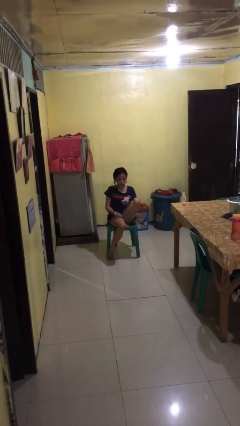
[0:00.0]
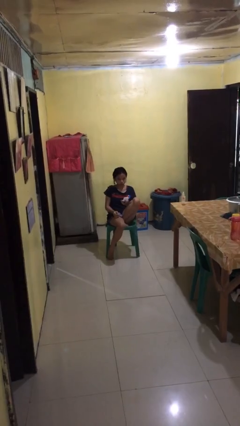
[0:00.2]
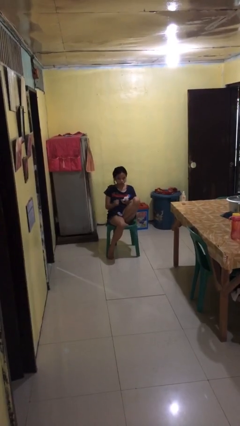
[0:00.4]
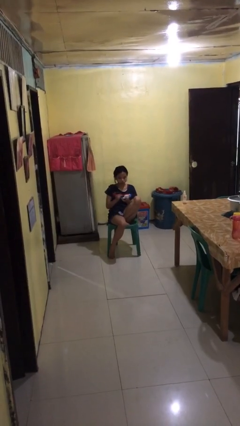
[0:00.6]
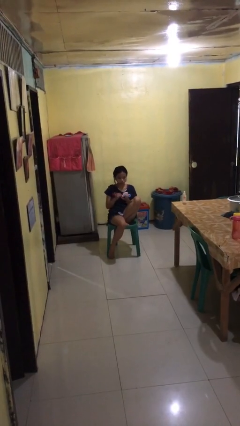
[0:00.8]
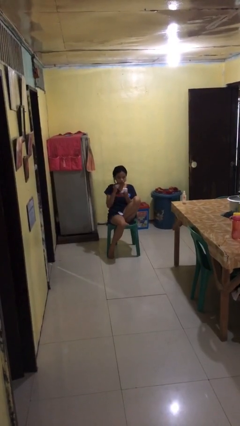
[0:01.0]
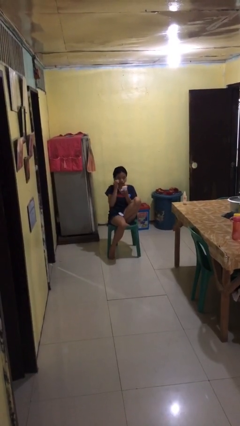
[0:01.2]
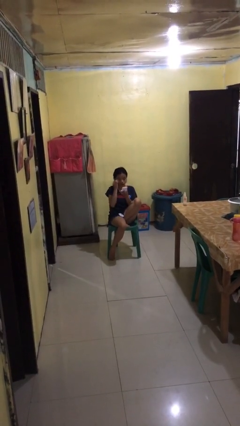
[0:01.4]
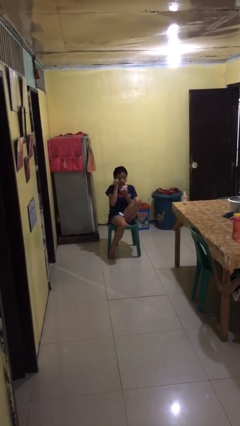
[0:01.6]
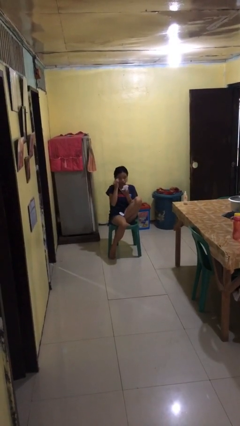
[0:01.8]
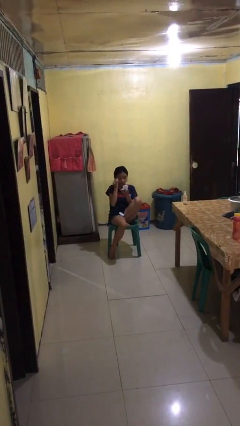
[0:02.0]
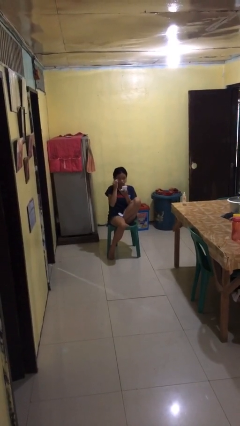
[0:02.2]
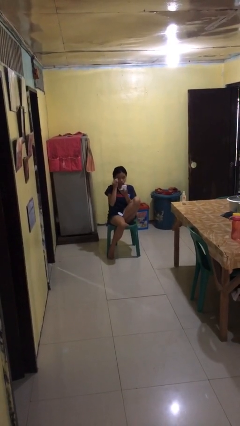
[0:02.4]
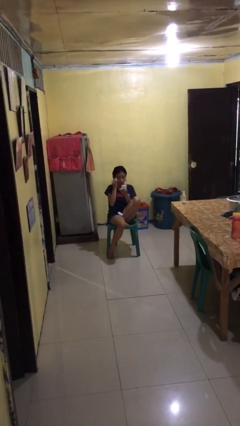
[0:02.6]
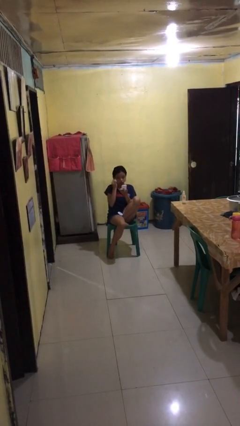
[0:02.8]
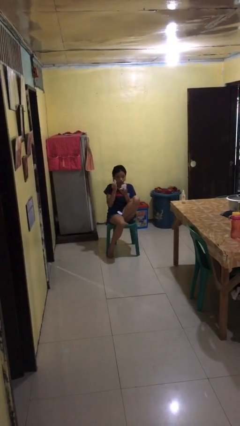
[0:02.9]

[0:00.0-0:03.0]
person applies eye makeup

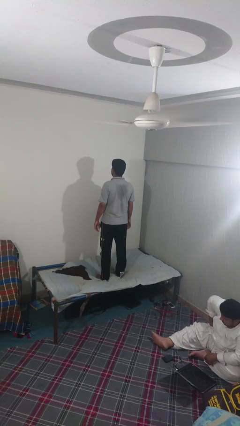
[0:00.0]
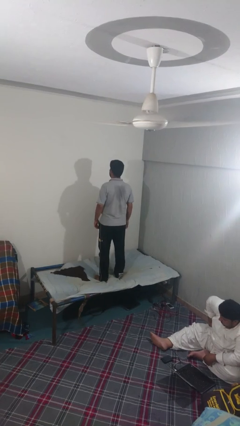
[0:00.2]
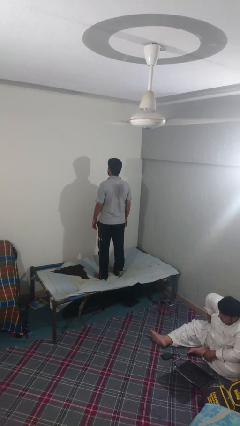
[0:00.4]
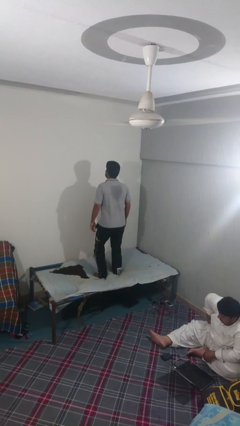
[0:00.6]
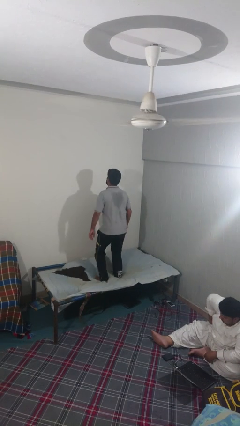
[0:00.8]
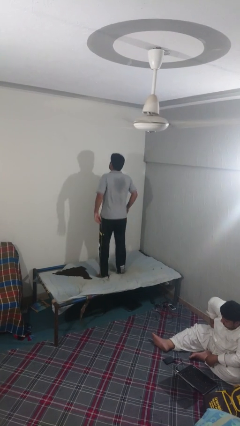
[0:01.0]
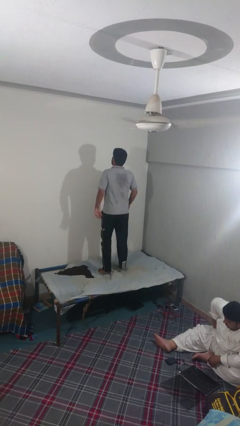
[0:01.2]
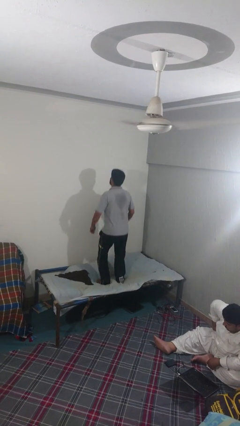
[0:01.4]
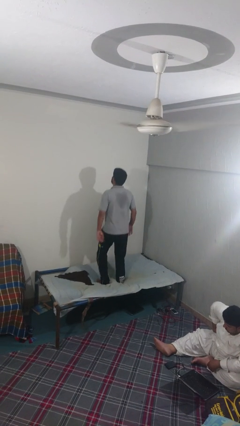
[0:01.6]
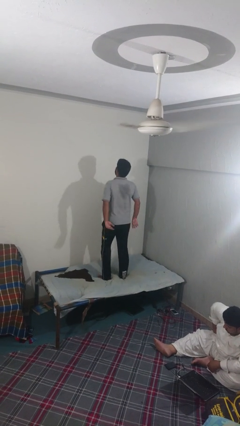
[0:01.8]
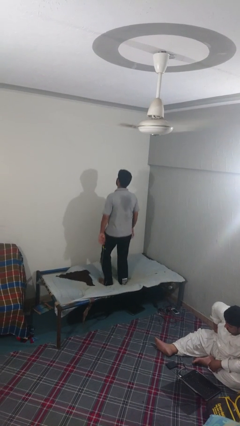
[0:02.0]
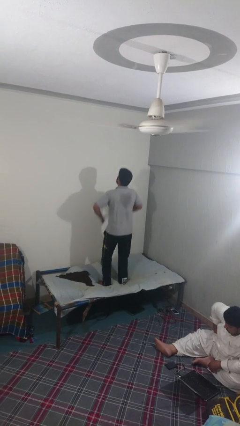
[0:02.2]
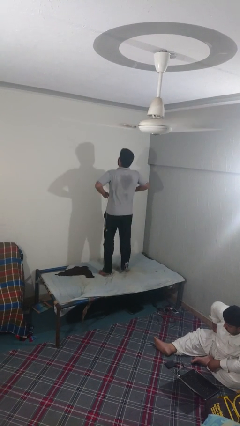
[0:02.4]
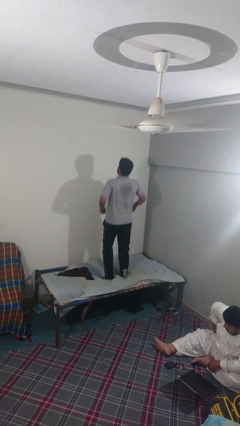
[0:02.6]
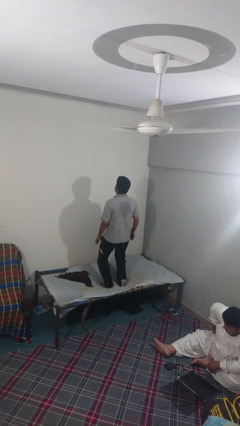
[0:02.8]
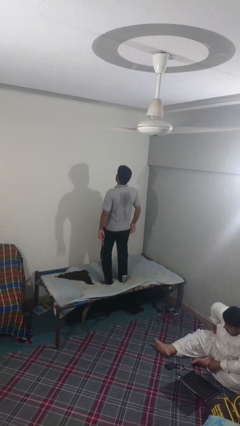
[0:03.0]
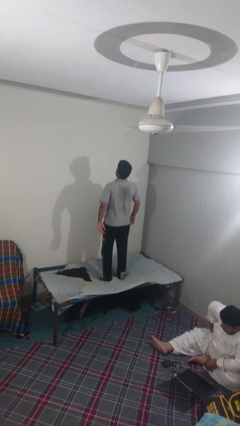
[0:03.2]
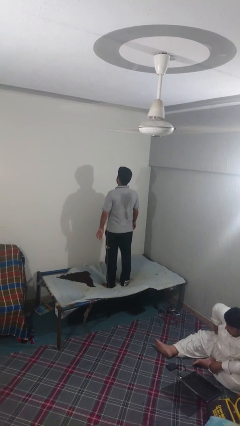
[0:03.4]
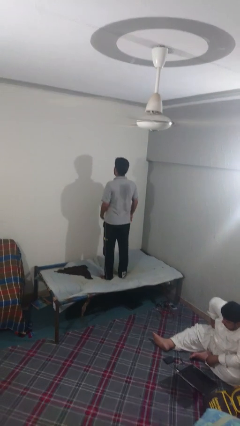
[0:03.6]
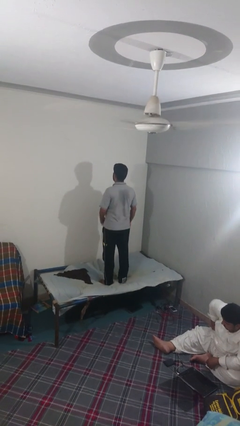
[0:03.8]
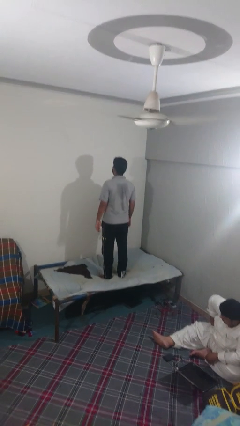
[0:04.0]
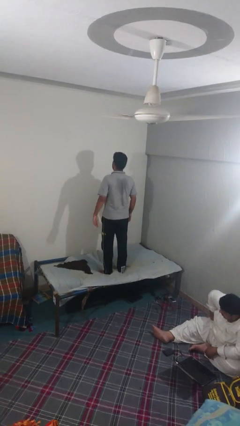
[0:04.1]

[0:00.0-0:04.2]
person jumps on bed

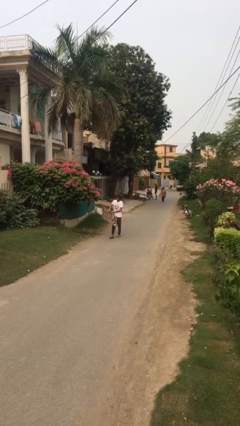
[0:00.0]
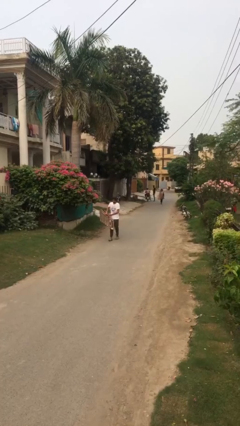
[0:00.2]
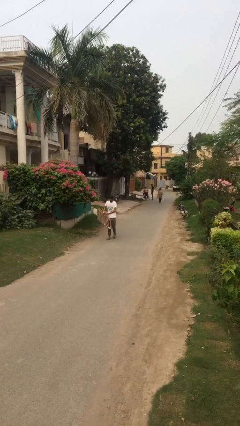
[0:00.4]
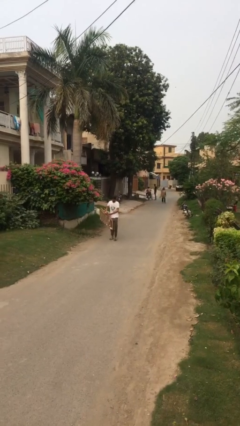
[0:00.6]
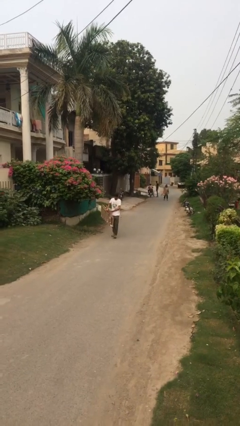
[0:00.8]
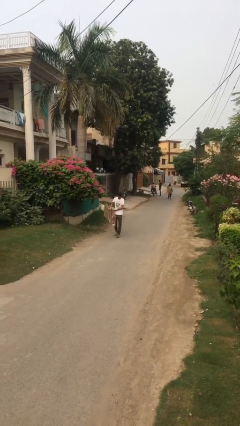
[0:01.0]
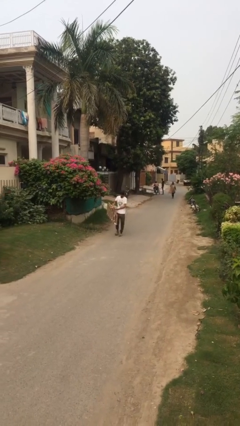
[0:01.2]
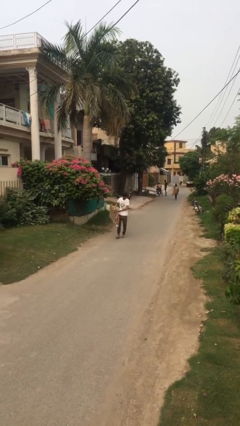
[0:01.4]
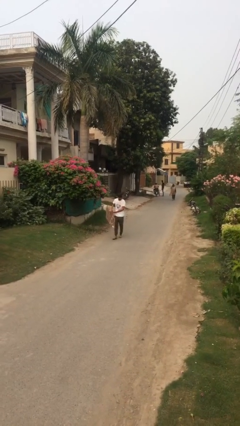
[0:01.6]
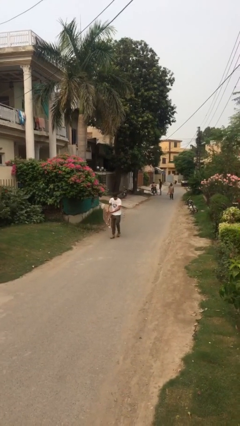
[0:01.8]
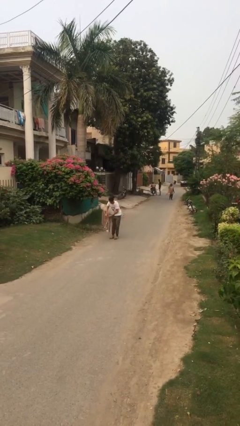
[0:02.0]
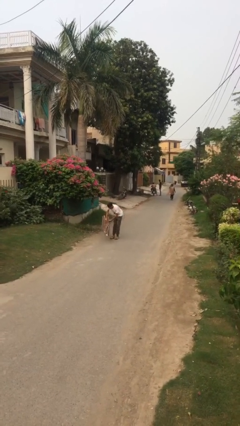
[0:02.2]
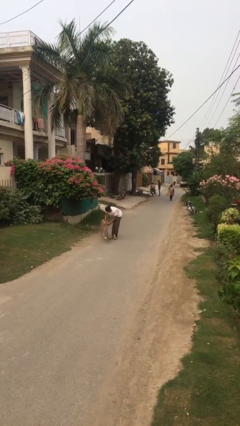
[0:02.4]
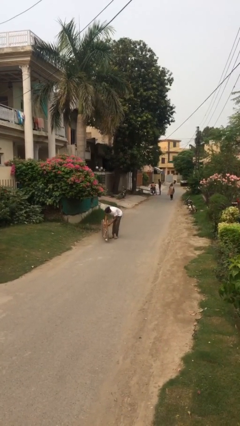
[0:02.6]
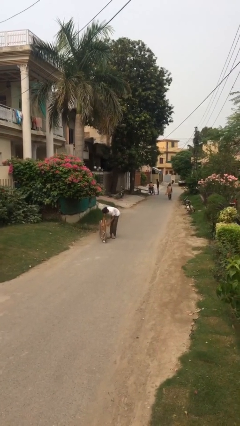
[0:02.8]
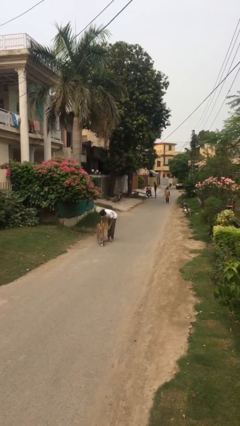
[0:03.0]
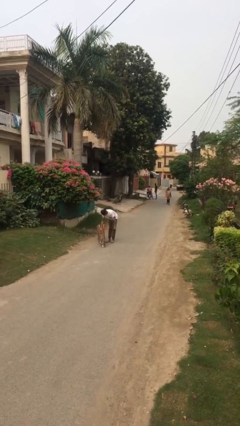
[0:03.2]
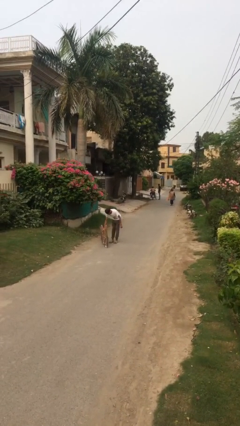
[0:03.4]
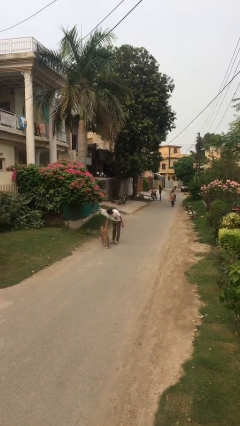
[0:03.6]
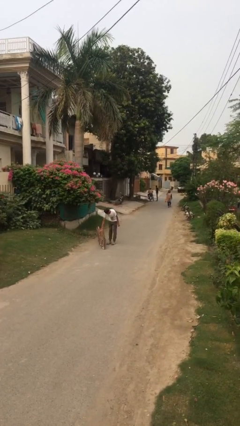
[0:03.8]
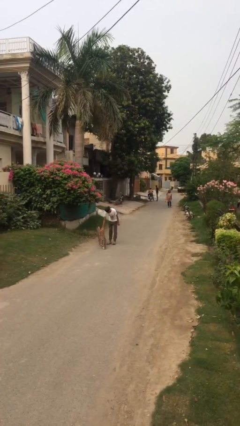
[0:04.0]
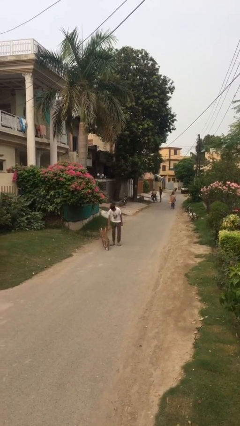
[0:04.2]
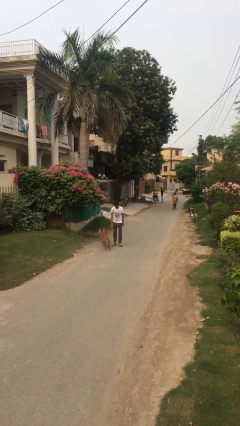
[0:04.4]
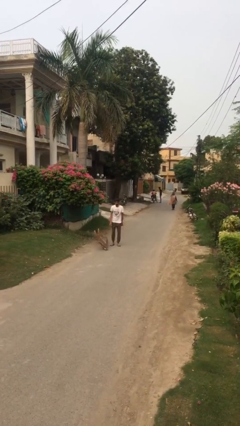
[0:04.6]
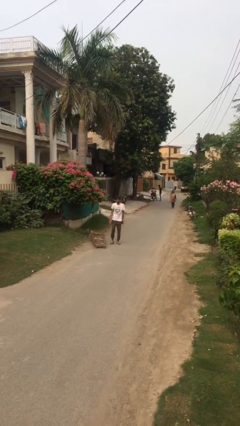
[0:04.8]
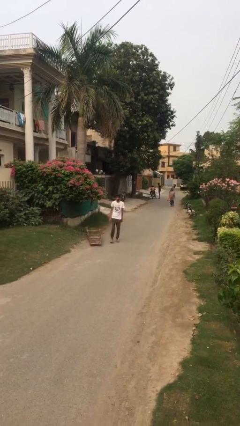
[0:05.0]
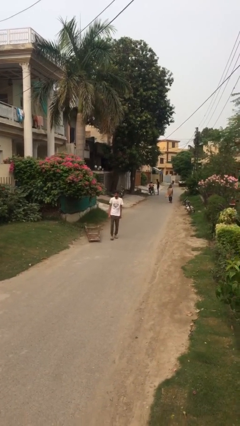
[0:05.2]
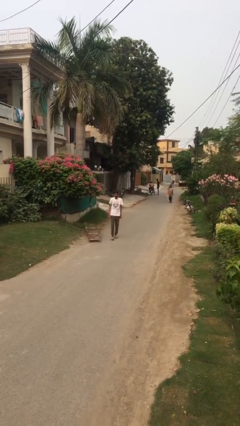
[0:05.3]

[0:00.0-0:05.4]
person puts down object on floor

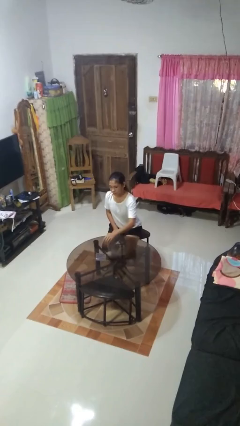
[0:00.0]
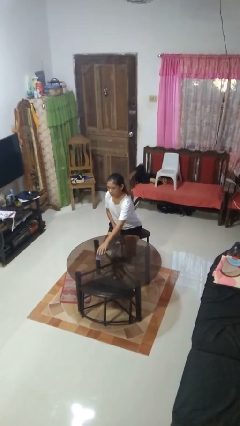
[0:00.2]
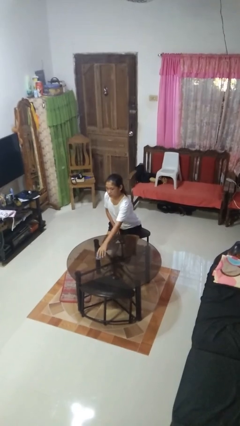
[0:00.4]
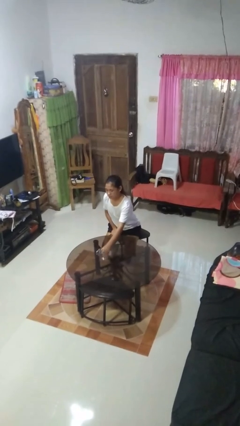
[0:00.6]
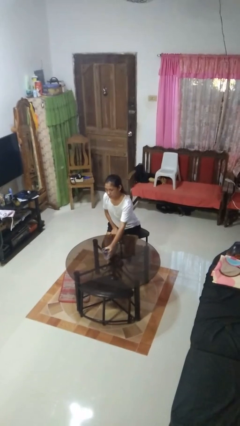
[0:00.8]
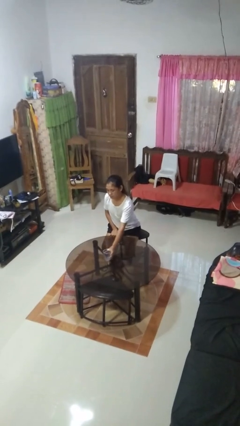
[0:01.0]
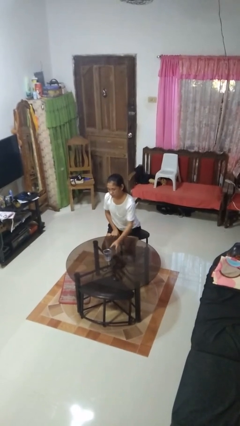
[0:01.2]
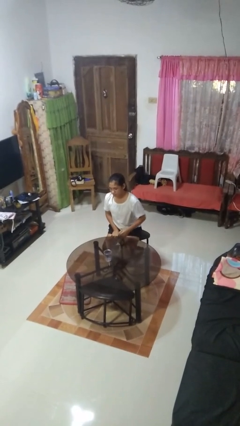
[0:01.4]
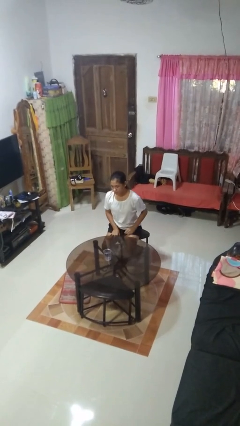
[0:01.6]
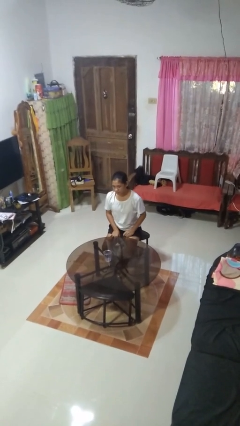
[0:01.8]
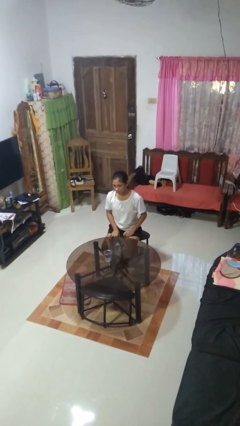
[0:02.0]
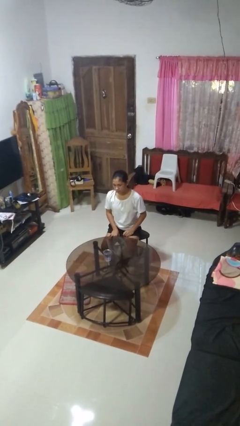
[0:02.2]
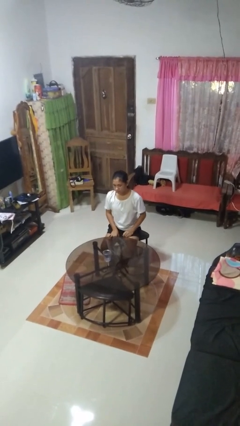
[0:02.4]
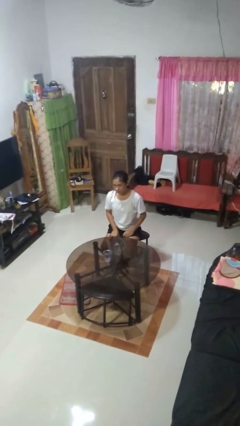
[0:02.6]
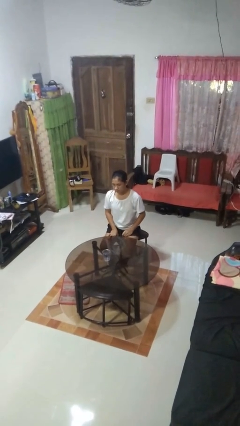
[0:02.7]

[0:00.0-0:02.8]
person sets upright glass

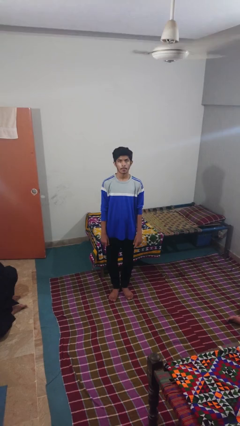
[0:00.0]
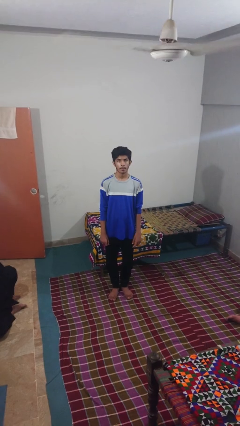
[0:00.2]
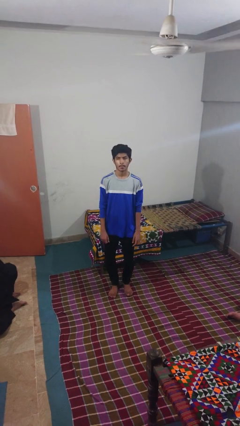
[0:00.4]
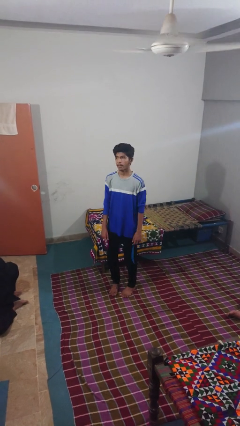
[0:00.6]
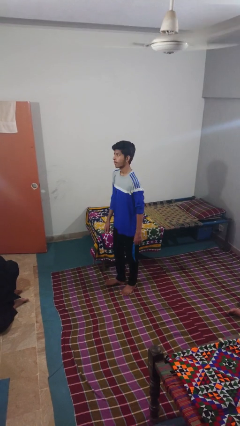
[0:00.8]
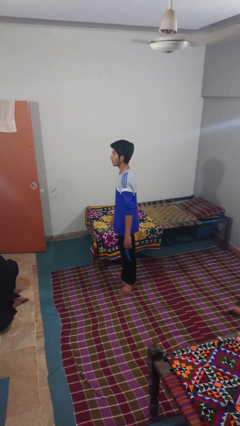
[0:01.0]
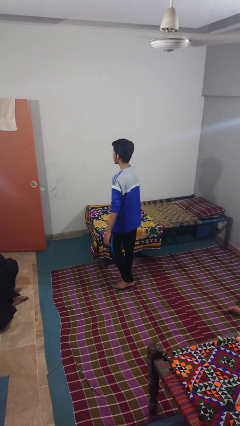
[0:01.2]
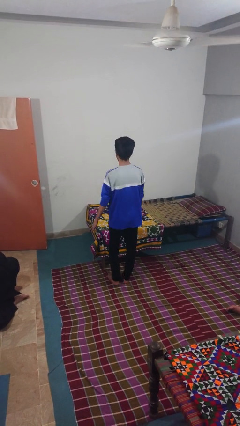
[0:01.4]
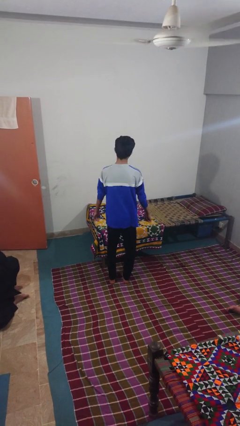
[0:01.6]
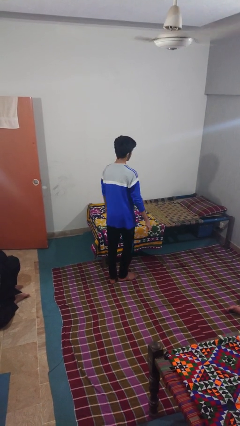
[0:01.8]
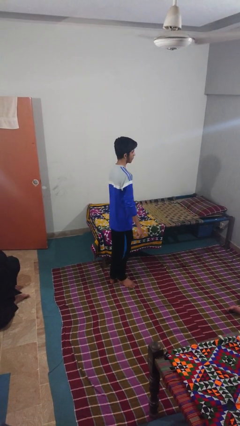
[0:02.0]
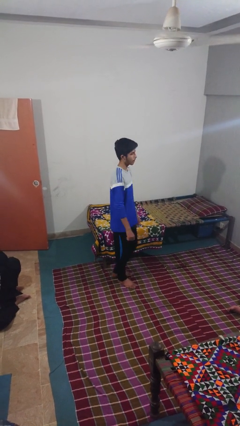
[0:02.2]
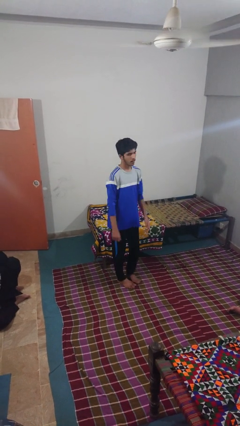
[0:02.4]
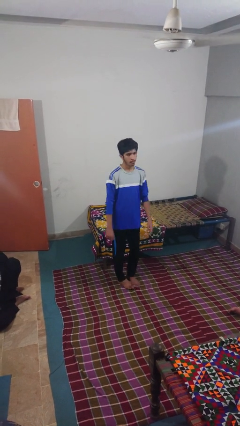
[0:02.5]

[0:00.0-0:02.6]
person twirls
